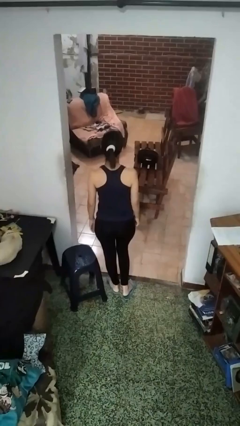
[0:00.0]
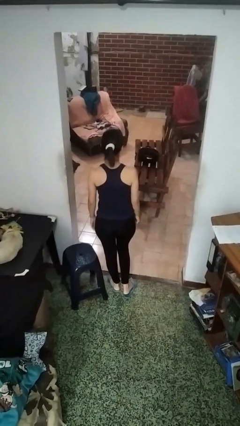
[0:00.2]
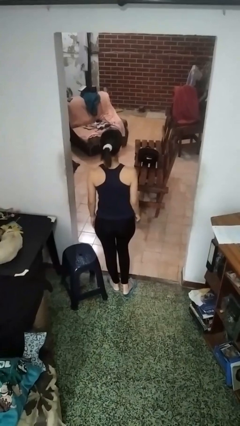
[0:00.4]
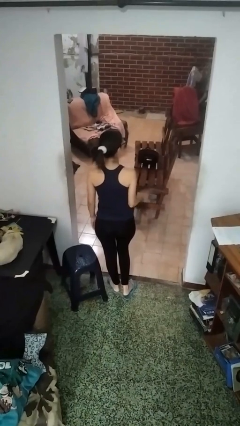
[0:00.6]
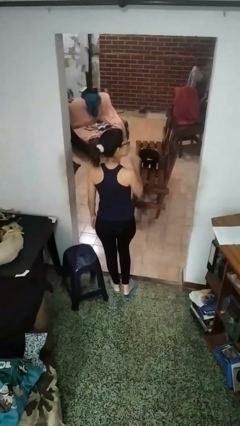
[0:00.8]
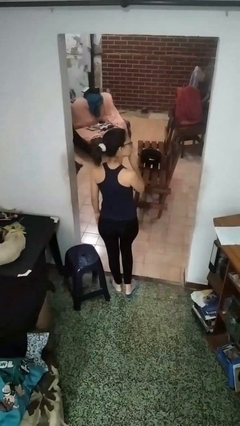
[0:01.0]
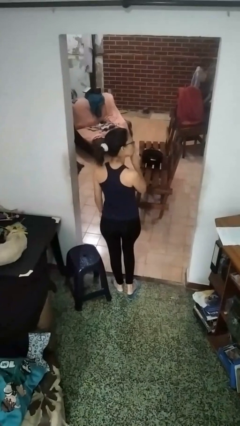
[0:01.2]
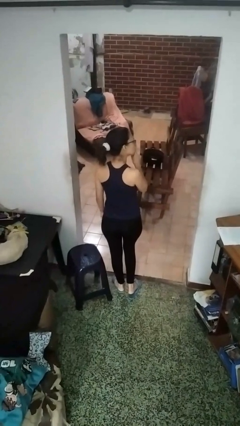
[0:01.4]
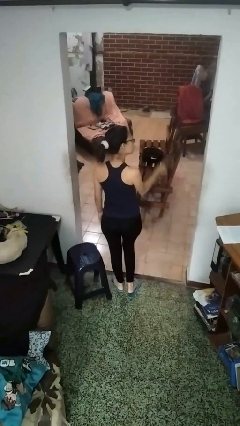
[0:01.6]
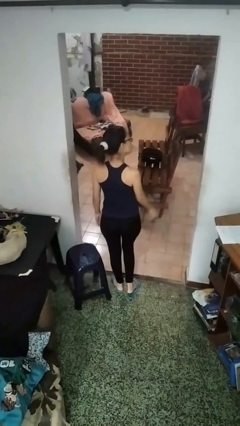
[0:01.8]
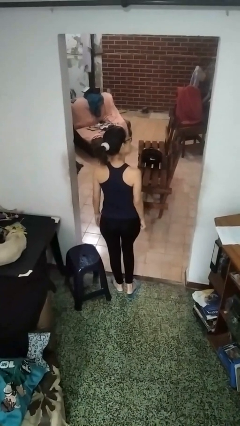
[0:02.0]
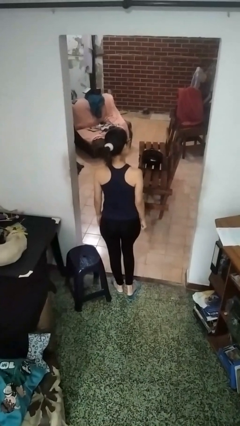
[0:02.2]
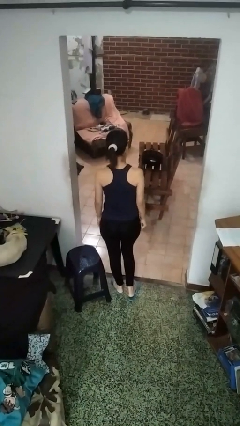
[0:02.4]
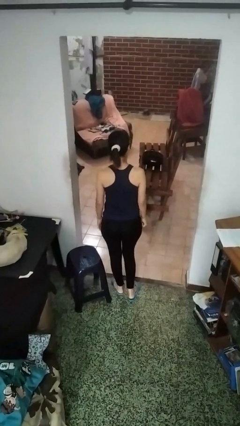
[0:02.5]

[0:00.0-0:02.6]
person gestures be quiet

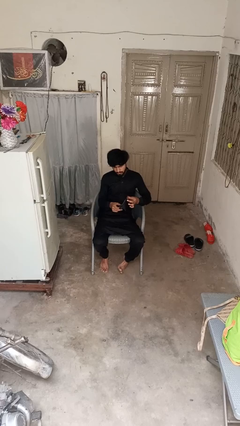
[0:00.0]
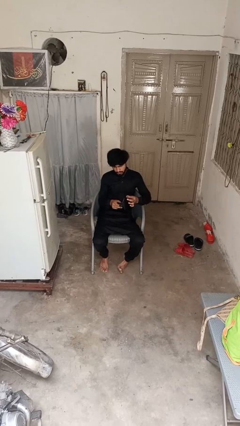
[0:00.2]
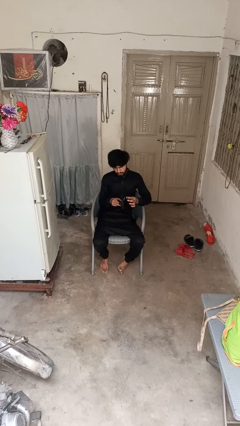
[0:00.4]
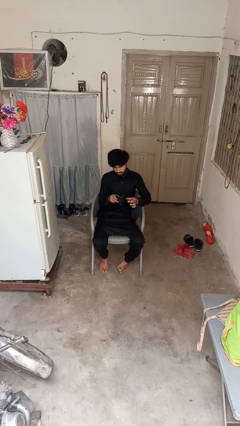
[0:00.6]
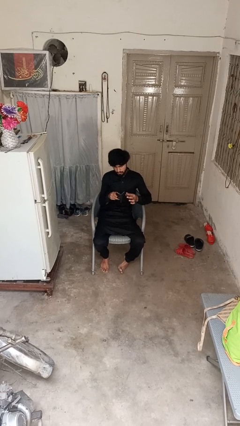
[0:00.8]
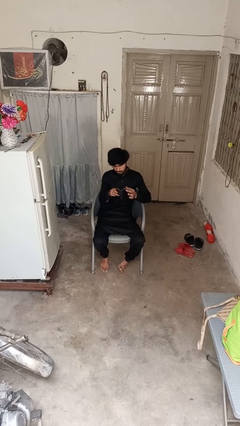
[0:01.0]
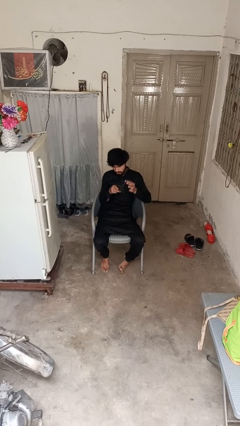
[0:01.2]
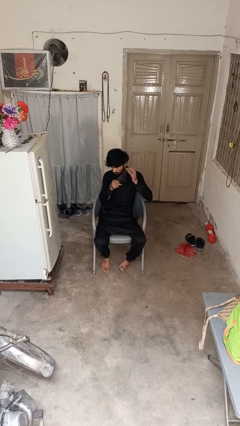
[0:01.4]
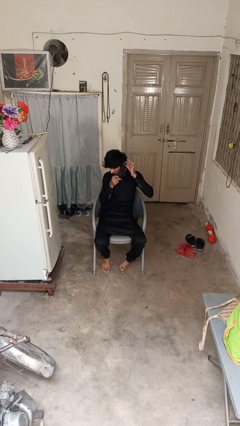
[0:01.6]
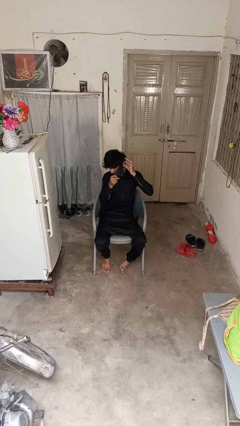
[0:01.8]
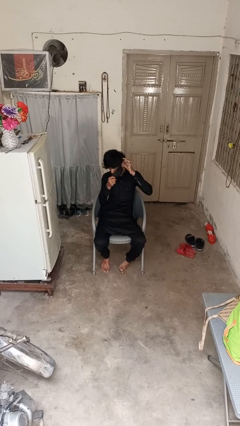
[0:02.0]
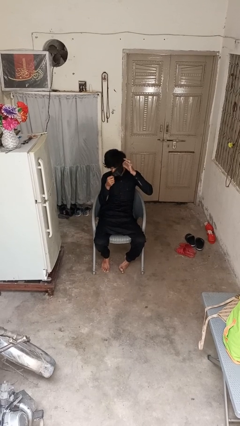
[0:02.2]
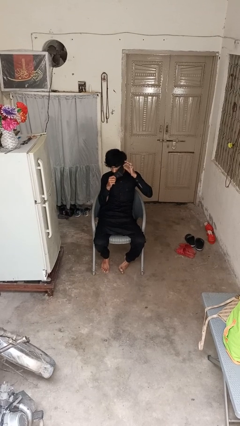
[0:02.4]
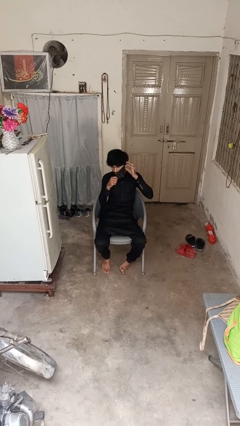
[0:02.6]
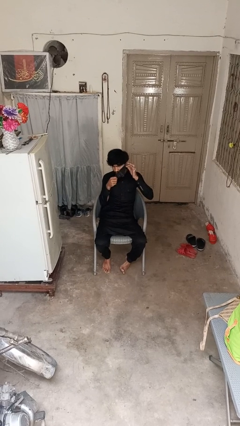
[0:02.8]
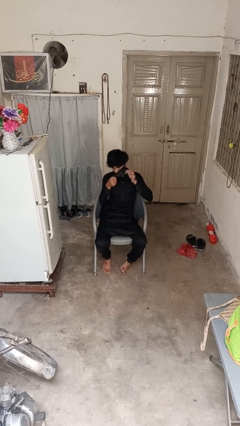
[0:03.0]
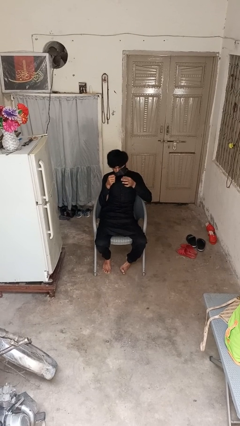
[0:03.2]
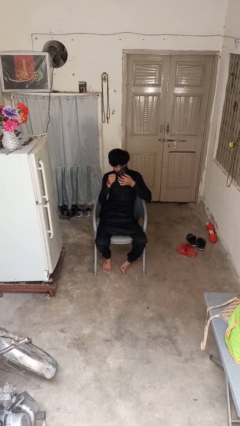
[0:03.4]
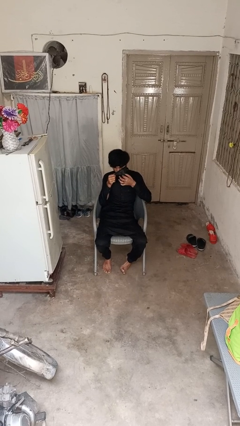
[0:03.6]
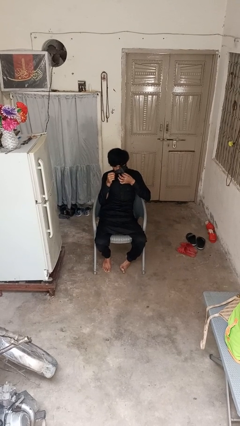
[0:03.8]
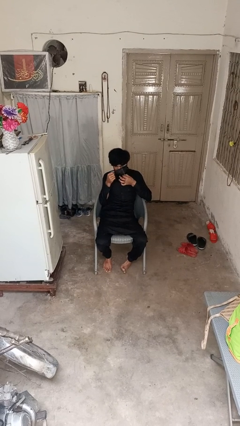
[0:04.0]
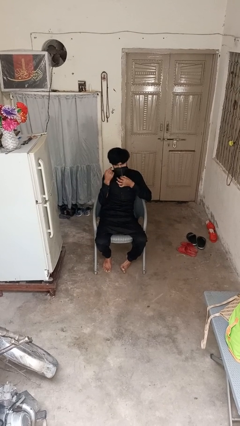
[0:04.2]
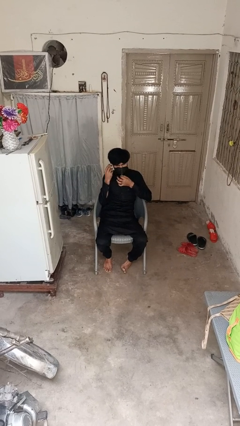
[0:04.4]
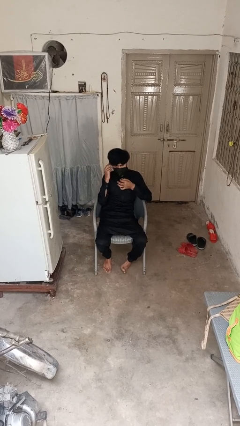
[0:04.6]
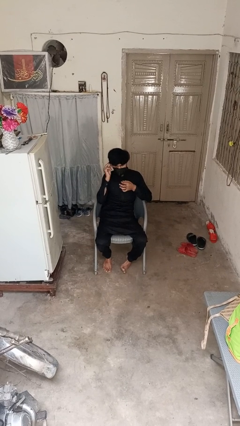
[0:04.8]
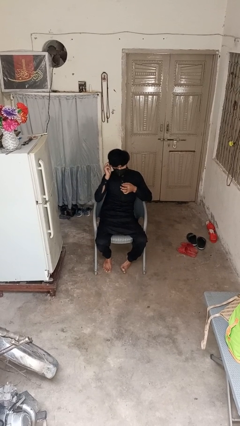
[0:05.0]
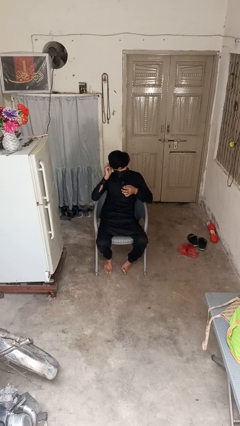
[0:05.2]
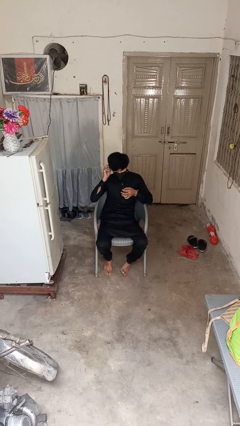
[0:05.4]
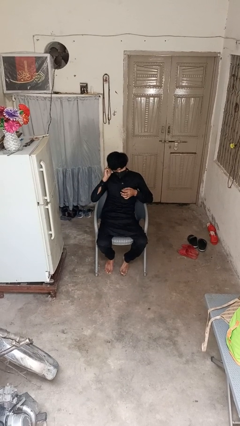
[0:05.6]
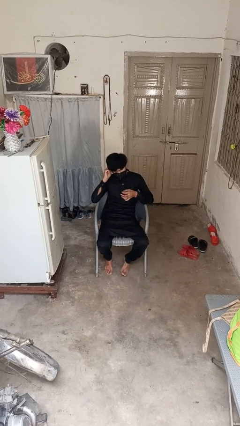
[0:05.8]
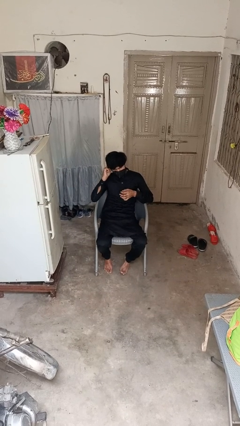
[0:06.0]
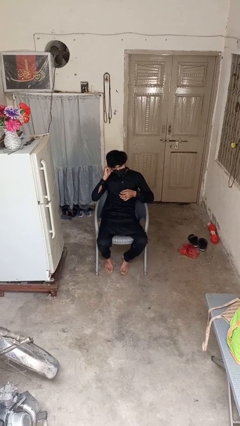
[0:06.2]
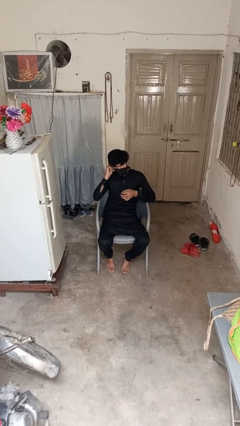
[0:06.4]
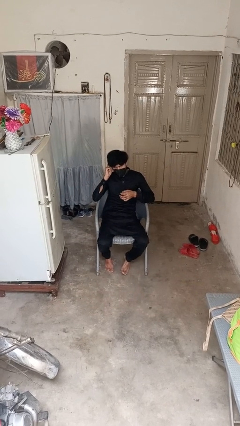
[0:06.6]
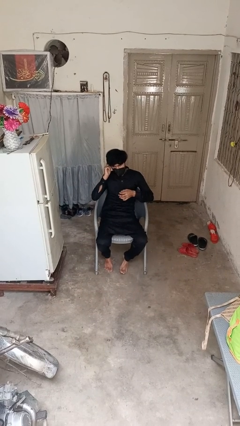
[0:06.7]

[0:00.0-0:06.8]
person puts on facemask

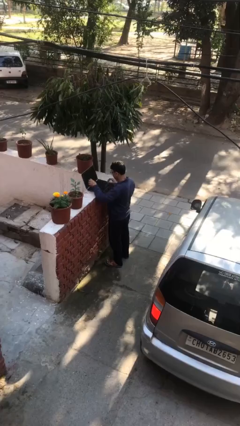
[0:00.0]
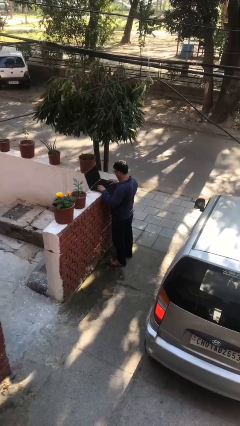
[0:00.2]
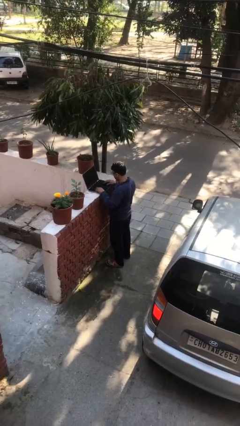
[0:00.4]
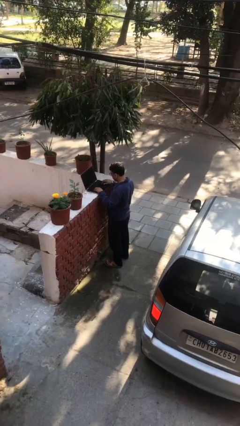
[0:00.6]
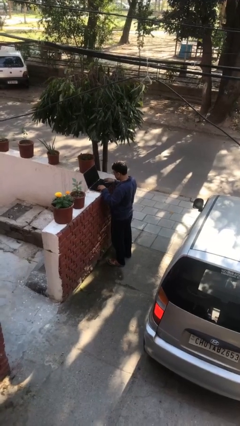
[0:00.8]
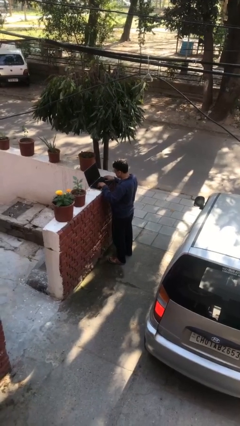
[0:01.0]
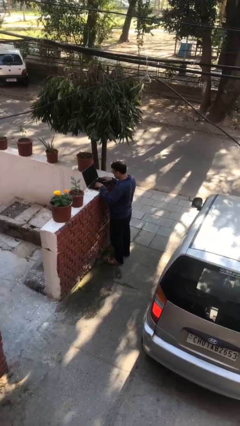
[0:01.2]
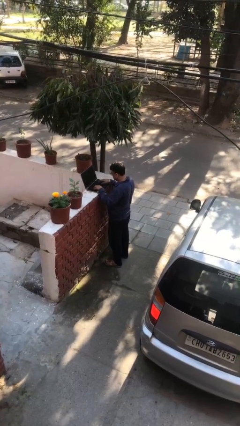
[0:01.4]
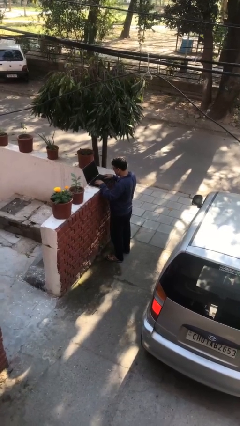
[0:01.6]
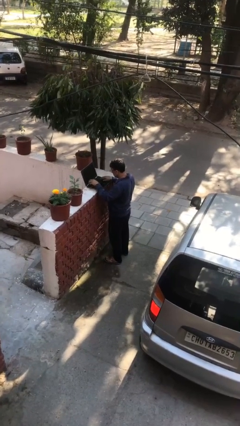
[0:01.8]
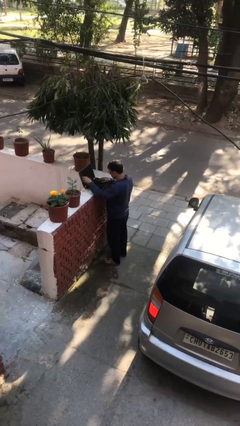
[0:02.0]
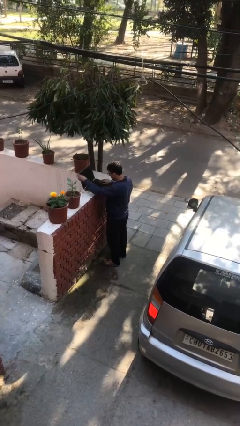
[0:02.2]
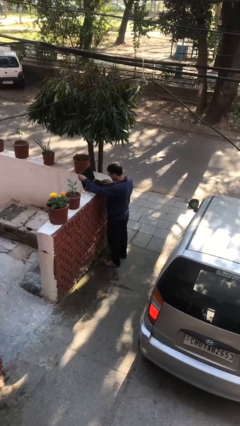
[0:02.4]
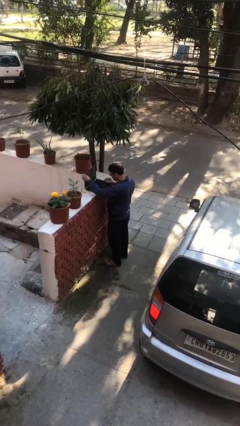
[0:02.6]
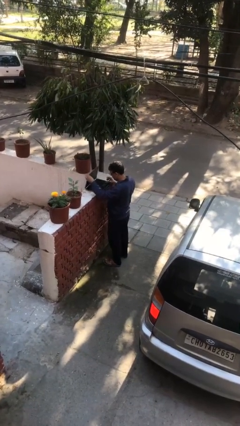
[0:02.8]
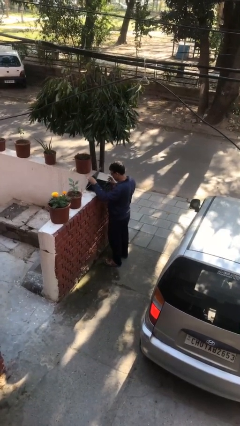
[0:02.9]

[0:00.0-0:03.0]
person interacts with laptop

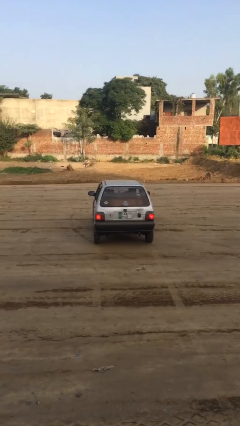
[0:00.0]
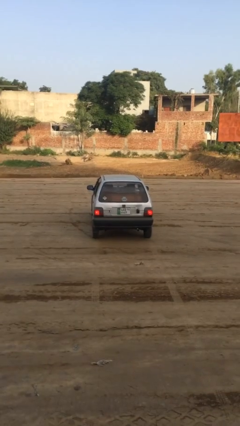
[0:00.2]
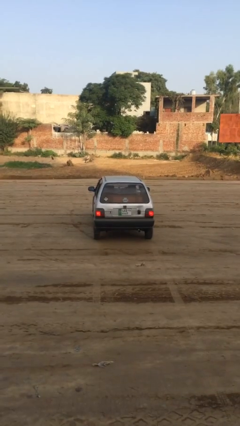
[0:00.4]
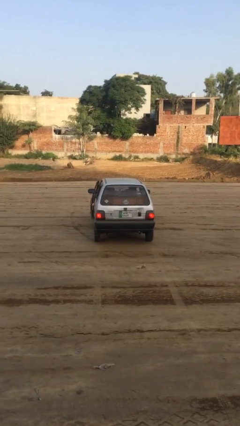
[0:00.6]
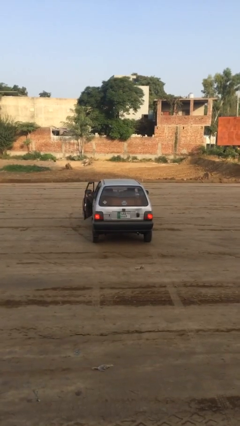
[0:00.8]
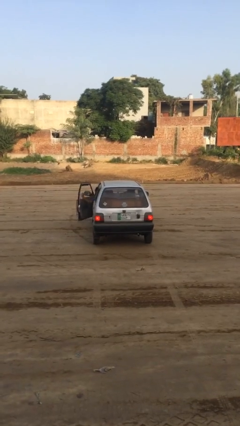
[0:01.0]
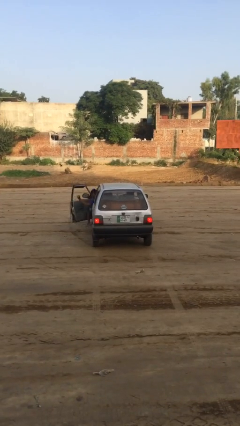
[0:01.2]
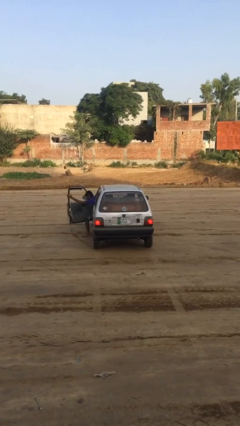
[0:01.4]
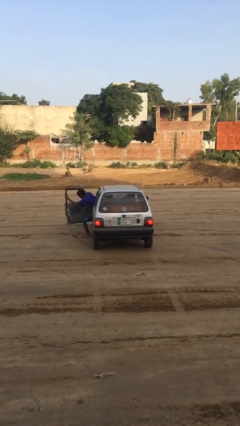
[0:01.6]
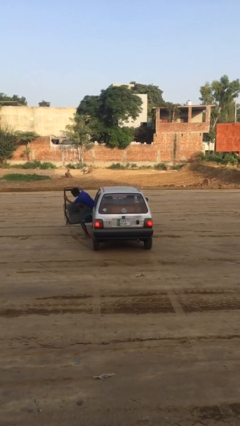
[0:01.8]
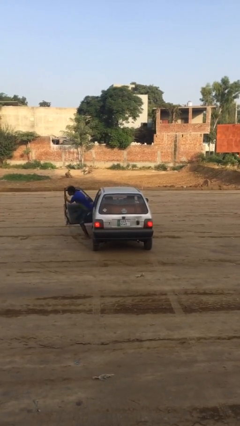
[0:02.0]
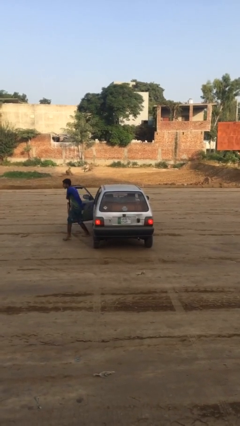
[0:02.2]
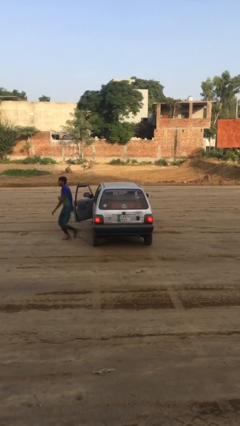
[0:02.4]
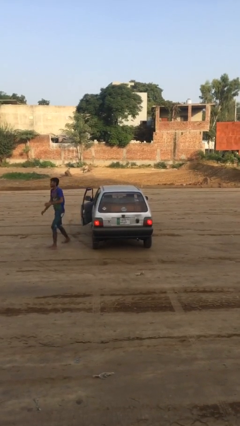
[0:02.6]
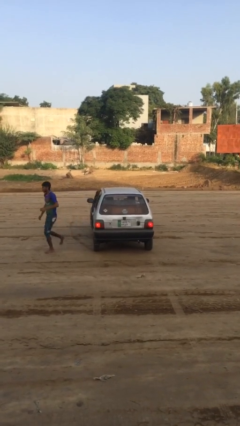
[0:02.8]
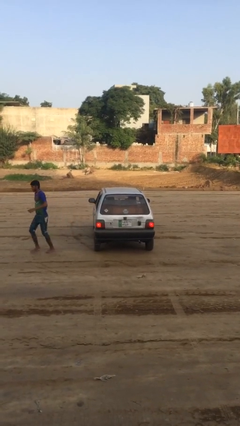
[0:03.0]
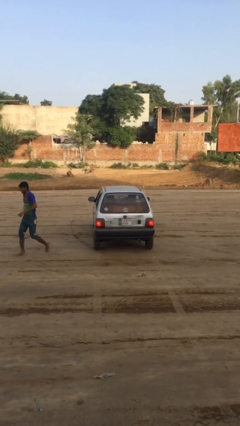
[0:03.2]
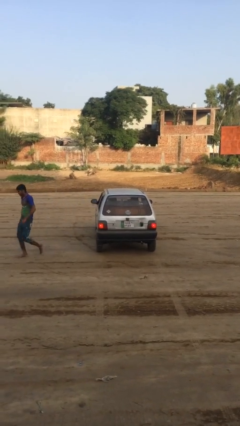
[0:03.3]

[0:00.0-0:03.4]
car drops off person

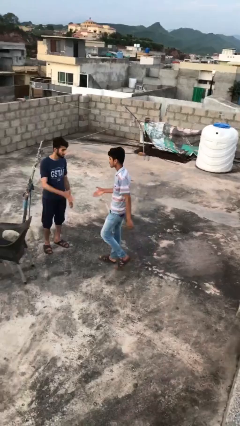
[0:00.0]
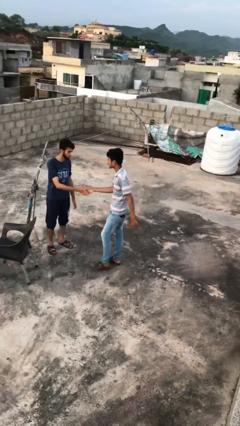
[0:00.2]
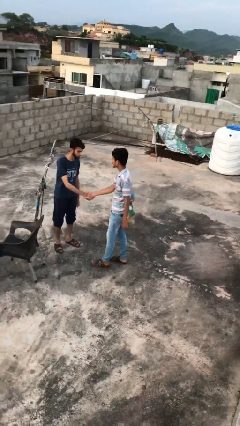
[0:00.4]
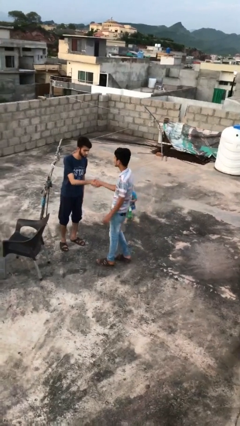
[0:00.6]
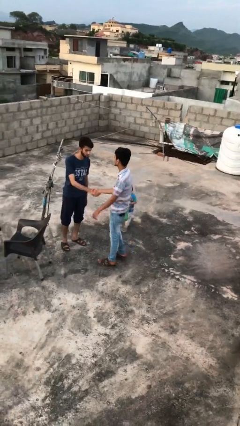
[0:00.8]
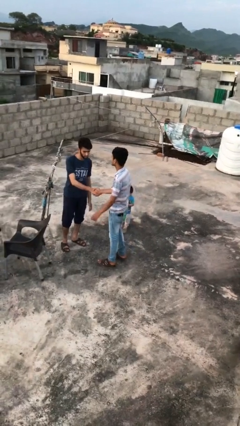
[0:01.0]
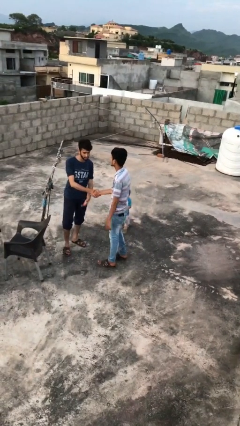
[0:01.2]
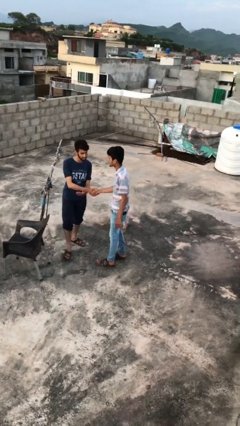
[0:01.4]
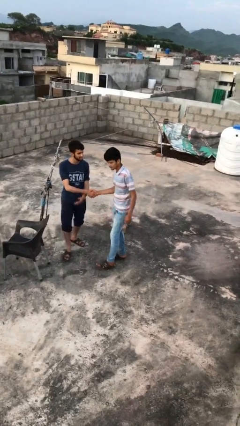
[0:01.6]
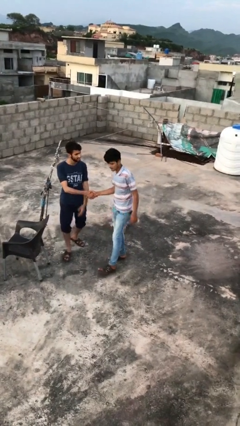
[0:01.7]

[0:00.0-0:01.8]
person shakes hand
